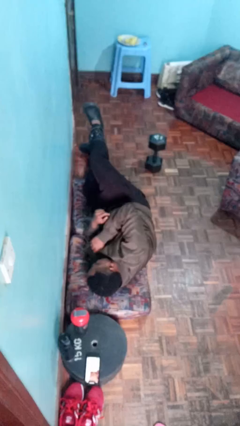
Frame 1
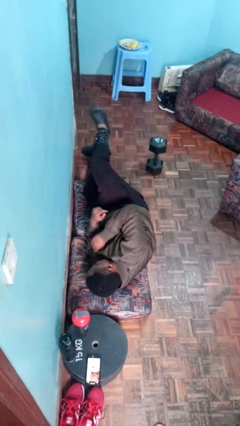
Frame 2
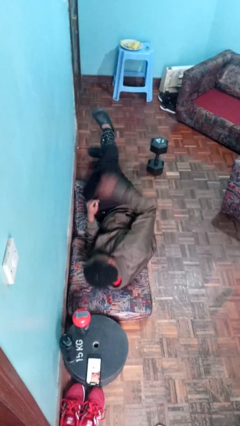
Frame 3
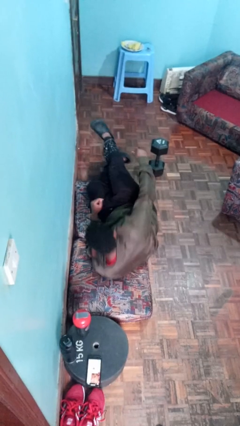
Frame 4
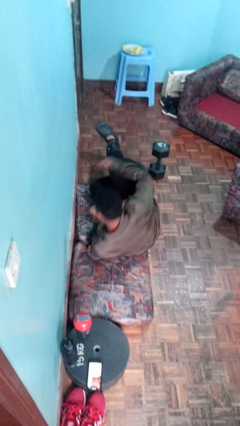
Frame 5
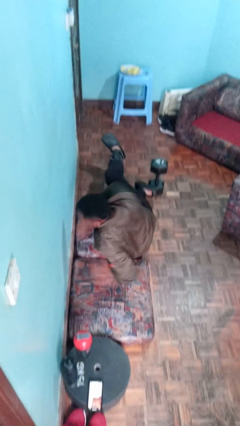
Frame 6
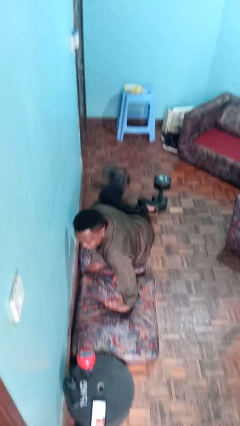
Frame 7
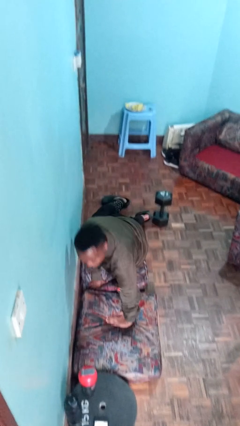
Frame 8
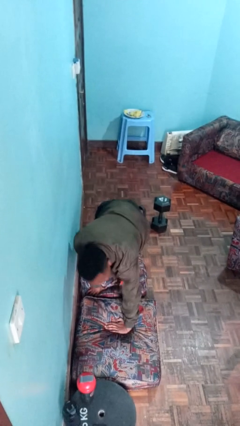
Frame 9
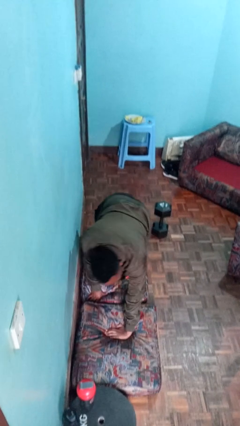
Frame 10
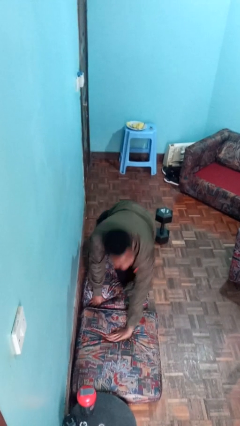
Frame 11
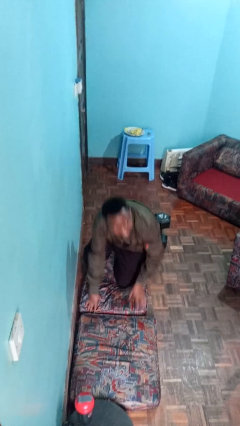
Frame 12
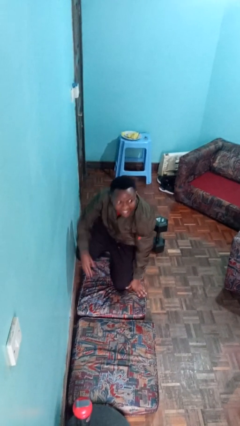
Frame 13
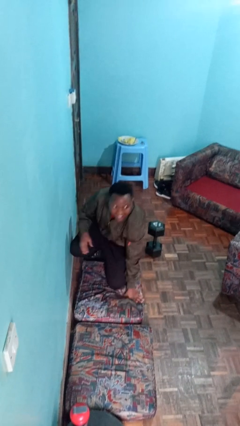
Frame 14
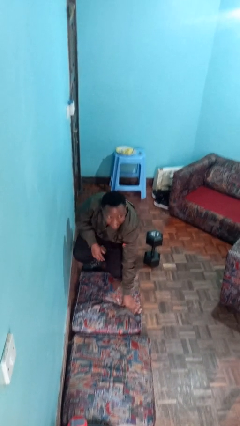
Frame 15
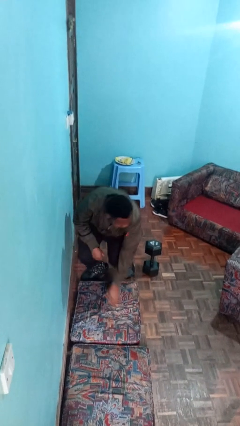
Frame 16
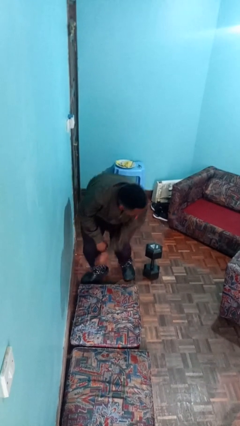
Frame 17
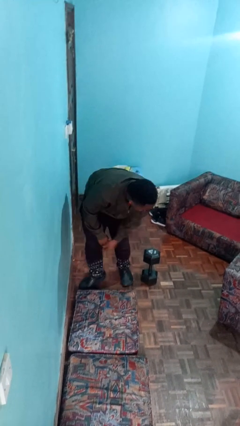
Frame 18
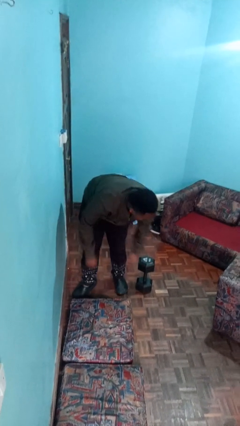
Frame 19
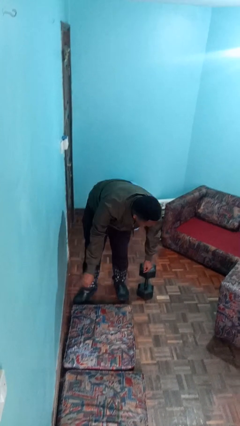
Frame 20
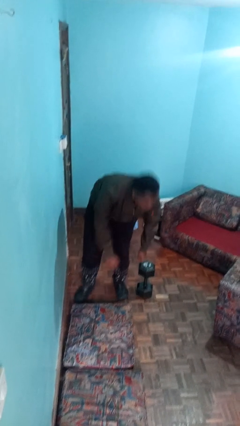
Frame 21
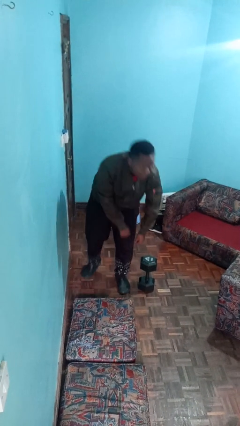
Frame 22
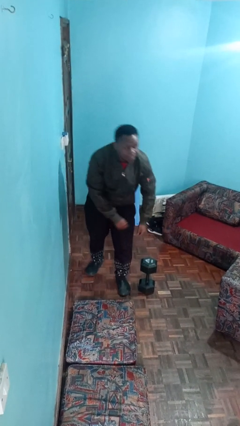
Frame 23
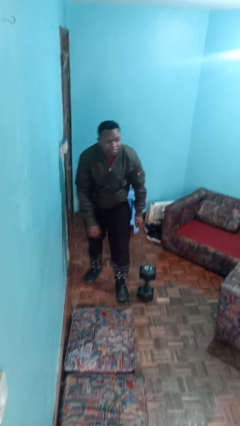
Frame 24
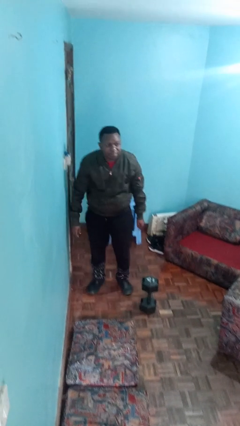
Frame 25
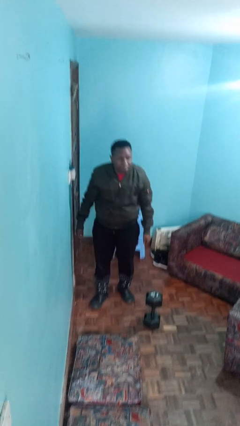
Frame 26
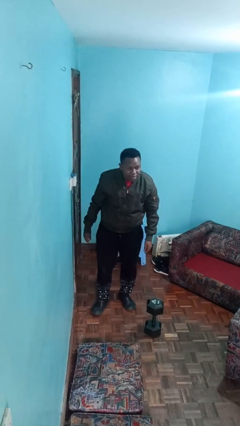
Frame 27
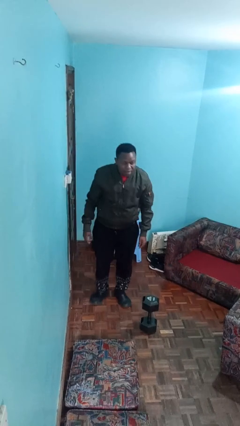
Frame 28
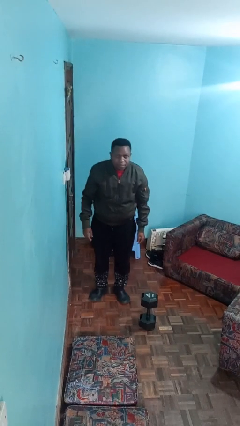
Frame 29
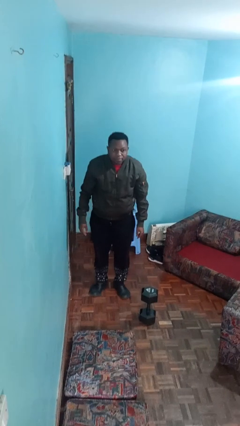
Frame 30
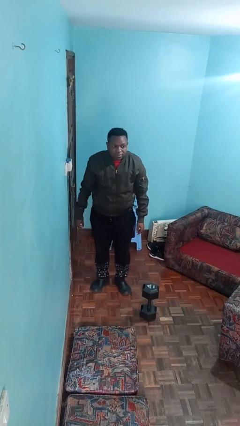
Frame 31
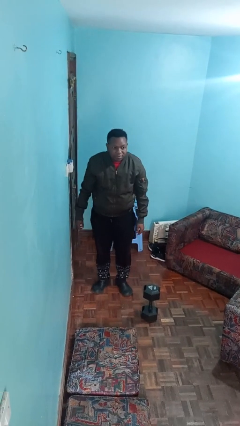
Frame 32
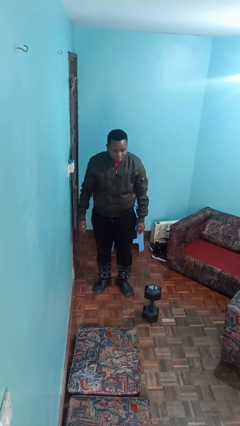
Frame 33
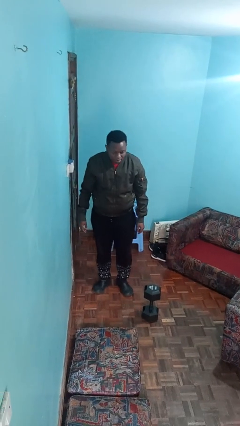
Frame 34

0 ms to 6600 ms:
person stands up from floor

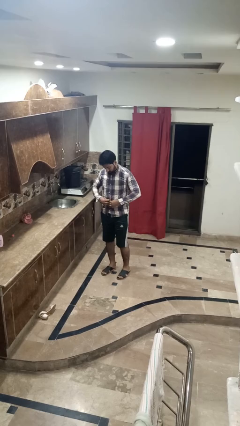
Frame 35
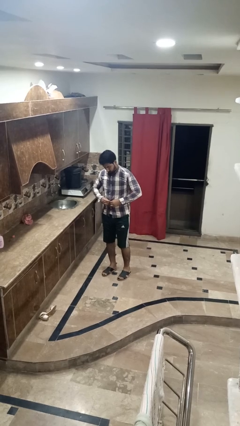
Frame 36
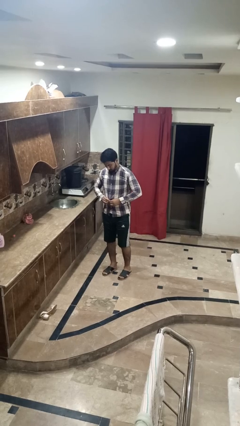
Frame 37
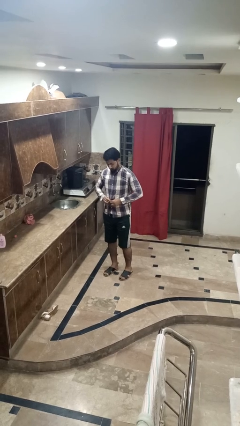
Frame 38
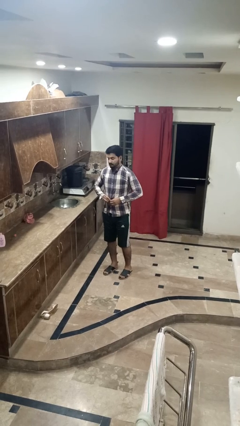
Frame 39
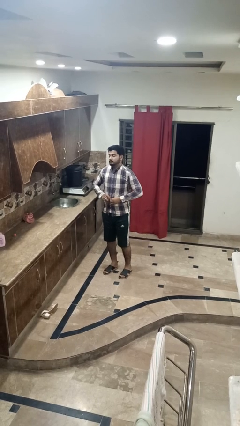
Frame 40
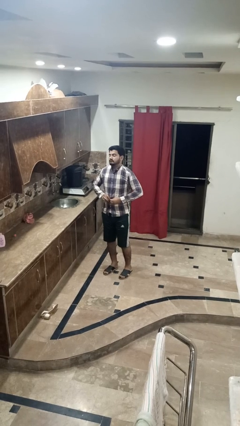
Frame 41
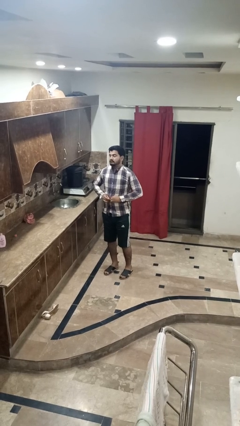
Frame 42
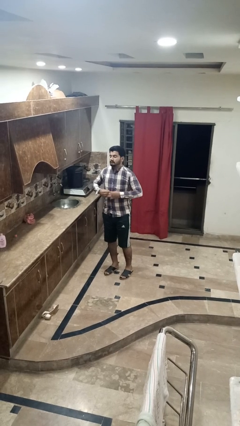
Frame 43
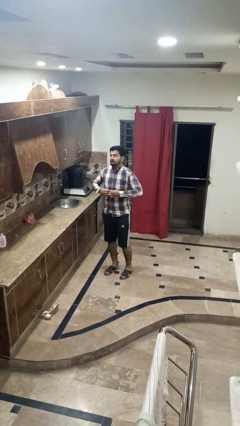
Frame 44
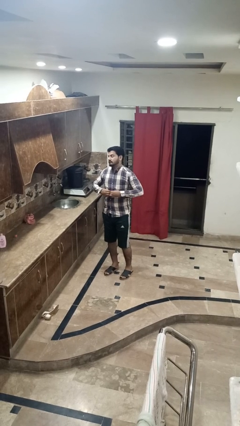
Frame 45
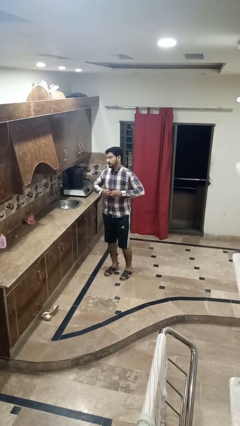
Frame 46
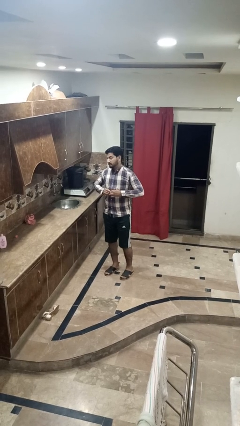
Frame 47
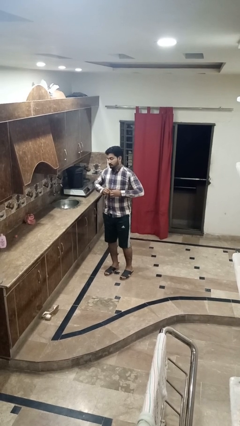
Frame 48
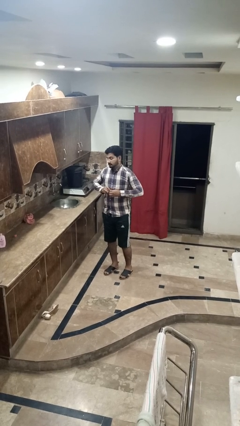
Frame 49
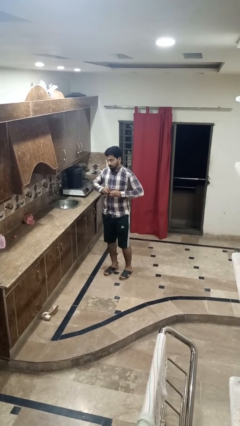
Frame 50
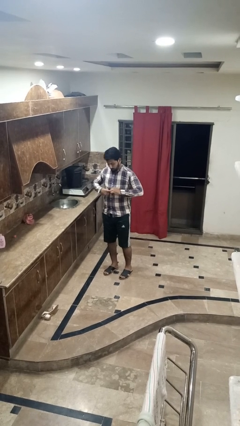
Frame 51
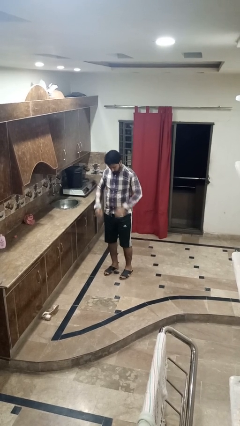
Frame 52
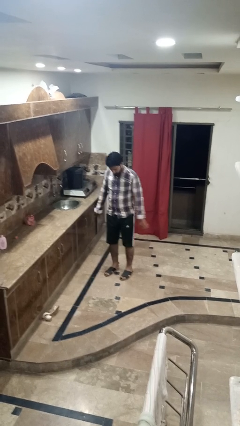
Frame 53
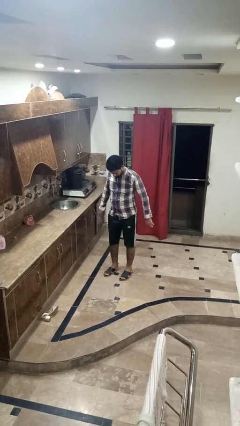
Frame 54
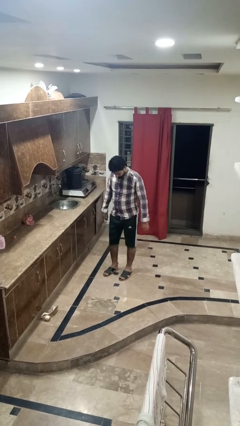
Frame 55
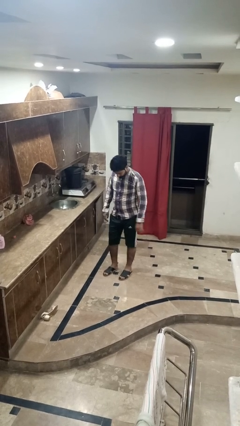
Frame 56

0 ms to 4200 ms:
person buttons shirt

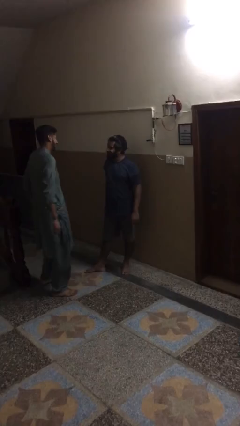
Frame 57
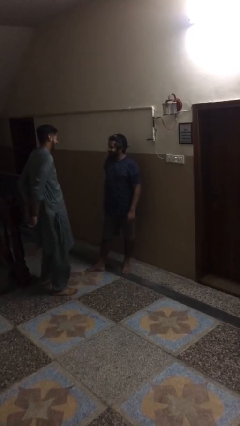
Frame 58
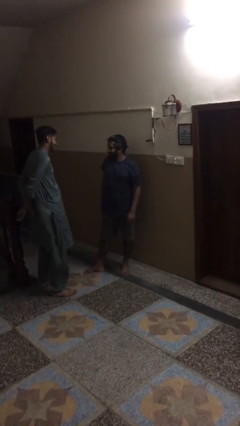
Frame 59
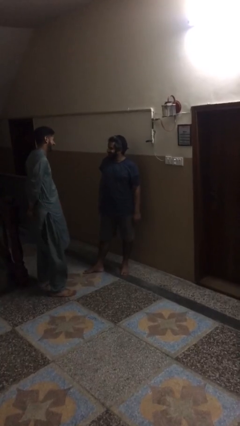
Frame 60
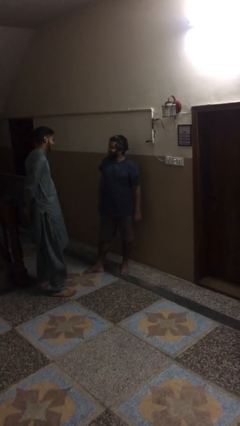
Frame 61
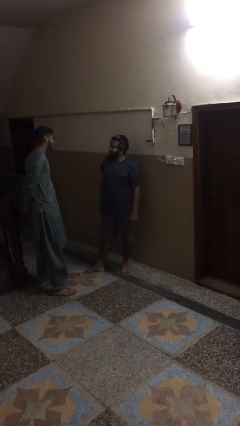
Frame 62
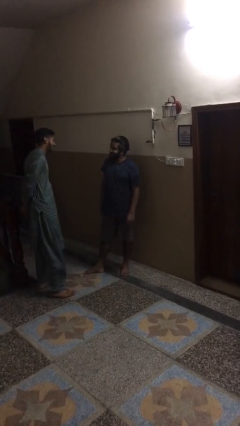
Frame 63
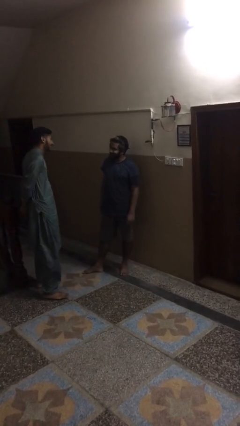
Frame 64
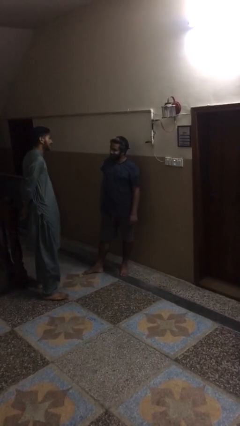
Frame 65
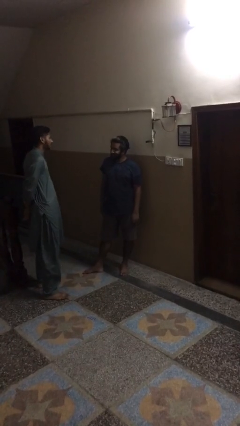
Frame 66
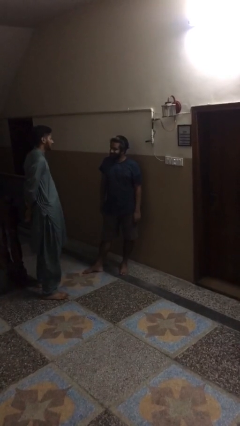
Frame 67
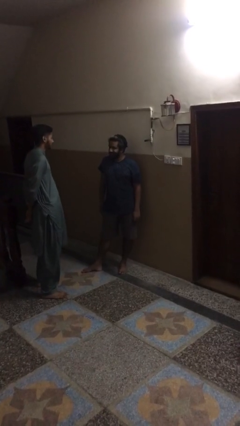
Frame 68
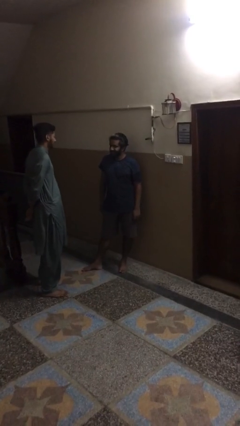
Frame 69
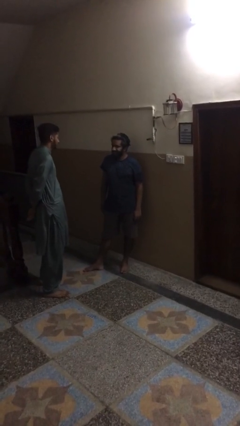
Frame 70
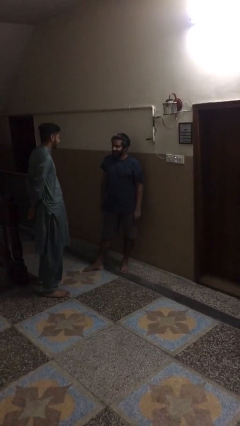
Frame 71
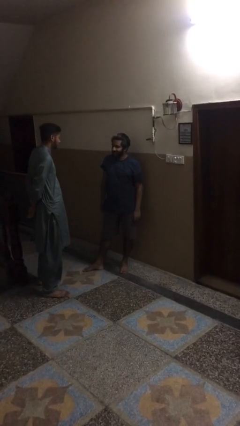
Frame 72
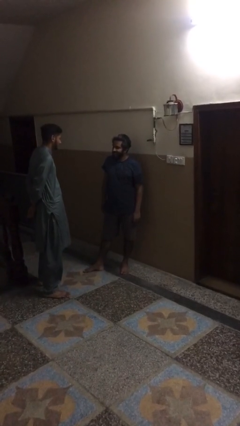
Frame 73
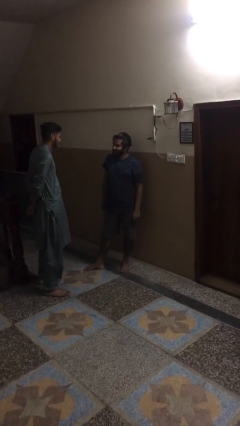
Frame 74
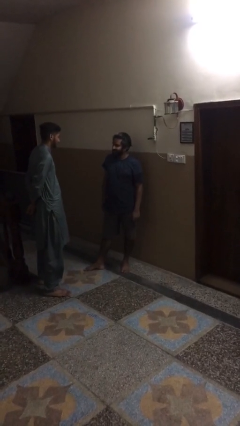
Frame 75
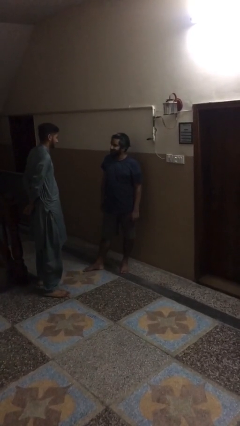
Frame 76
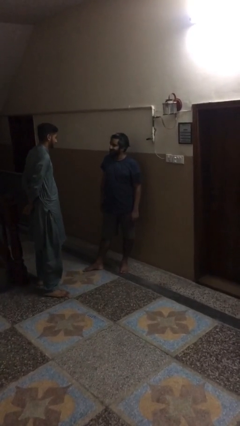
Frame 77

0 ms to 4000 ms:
person talks to person

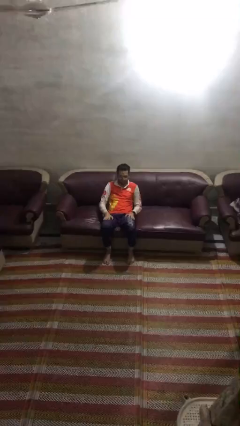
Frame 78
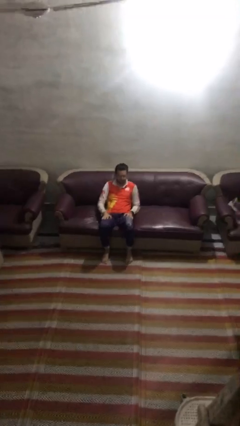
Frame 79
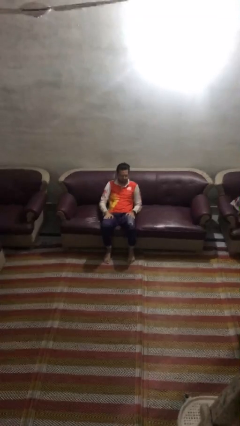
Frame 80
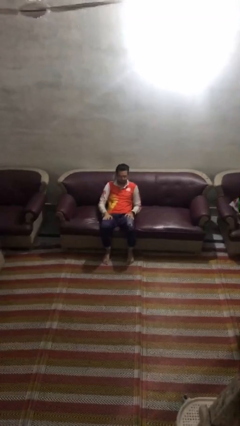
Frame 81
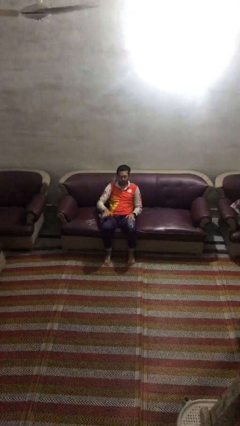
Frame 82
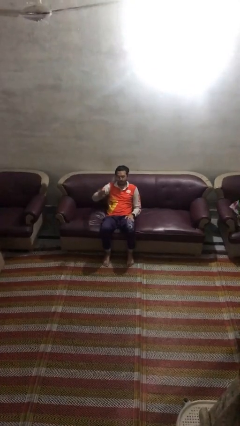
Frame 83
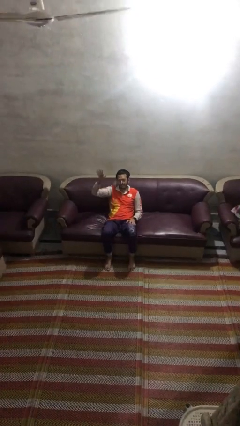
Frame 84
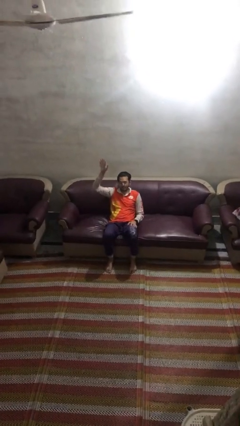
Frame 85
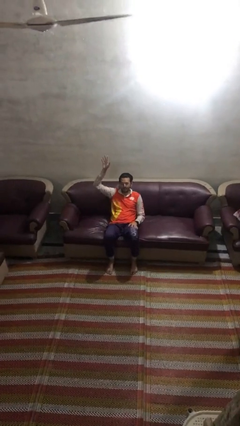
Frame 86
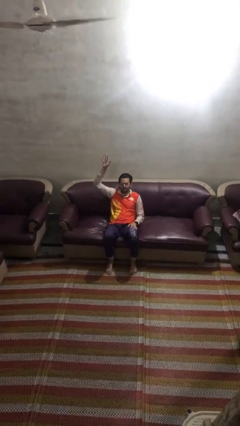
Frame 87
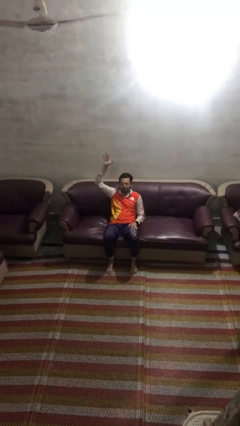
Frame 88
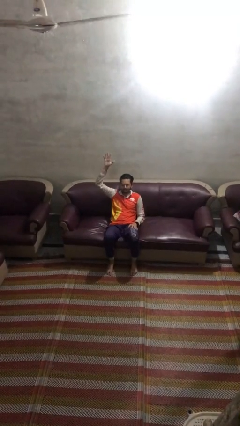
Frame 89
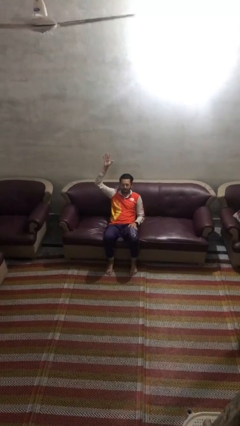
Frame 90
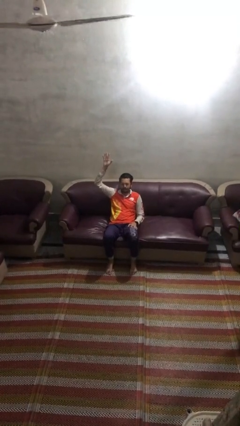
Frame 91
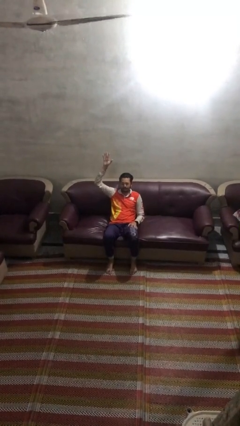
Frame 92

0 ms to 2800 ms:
person gestures raise hand
